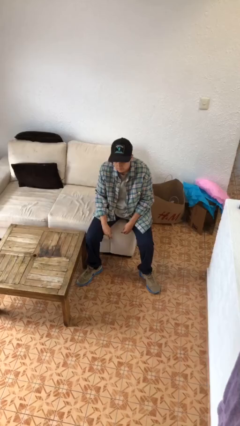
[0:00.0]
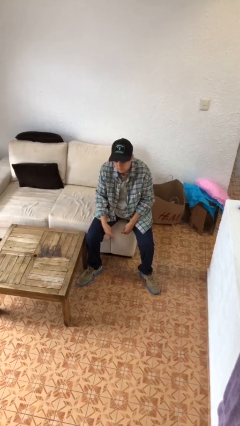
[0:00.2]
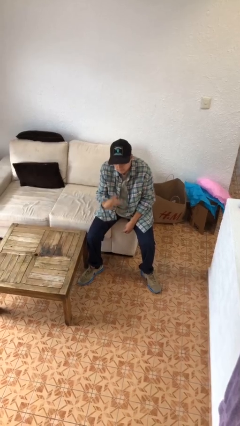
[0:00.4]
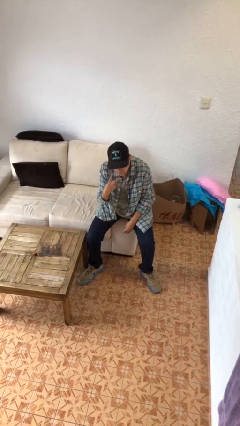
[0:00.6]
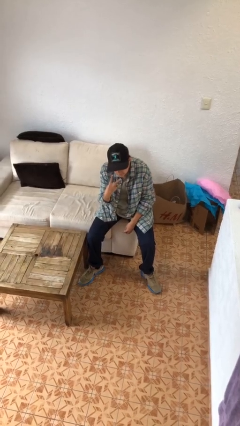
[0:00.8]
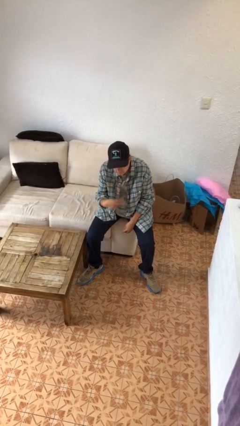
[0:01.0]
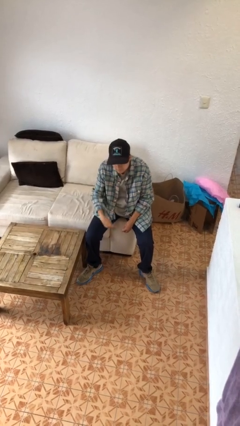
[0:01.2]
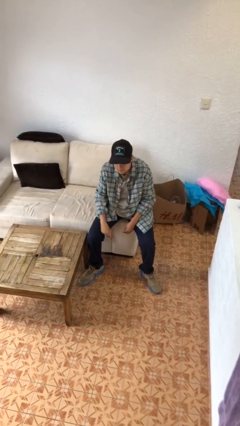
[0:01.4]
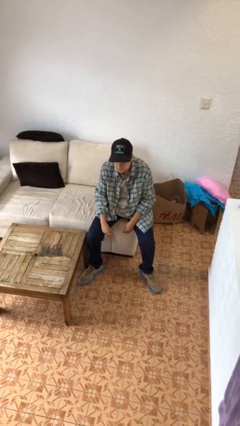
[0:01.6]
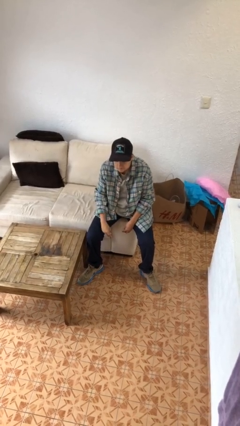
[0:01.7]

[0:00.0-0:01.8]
person gestures watch closely

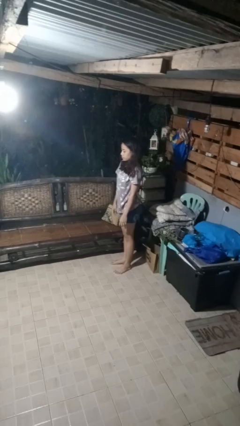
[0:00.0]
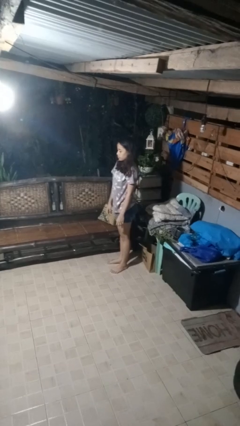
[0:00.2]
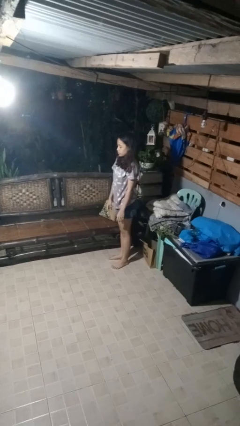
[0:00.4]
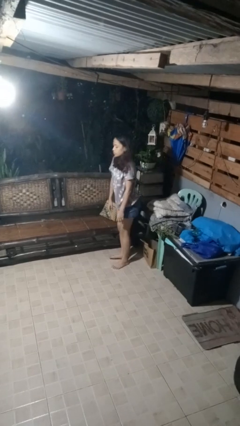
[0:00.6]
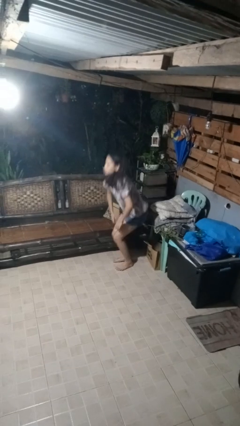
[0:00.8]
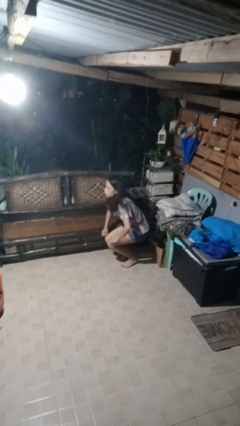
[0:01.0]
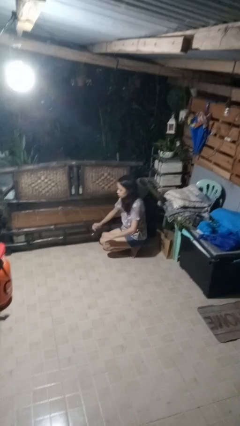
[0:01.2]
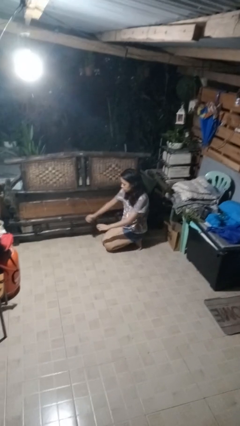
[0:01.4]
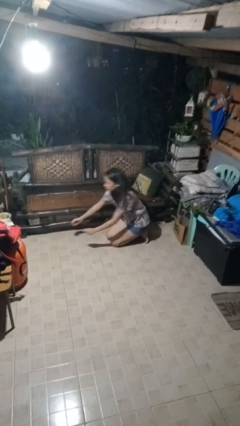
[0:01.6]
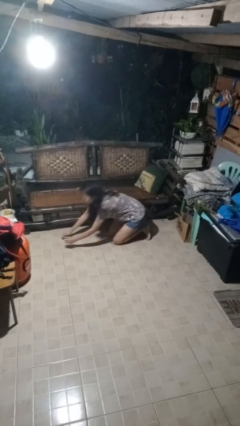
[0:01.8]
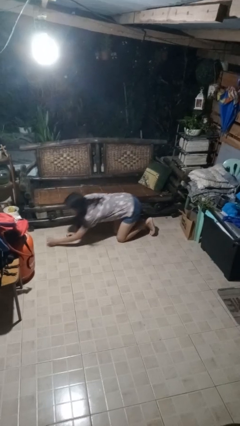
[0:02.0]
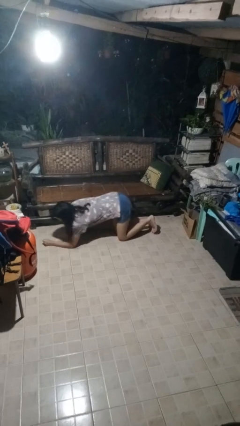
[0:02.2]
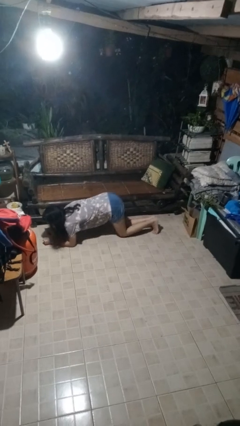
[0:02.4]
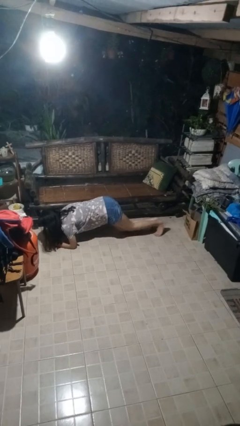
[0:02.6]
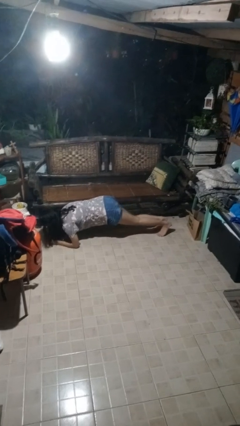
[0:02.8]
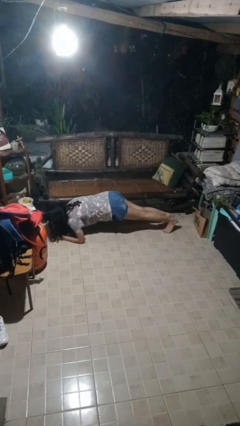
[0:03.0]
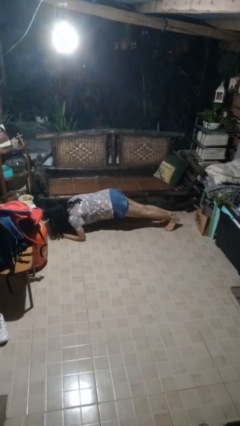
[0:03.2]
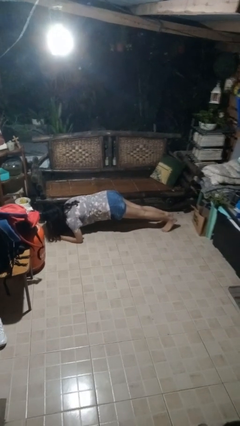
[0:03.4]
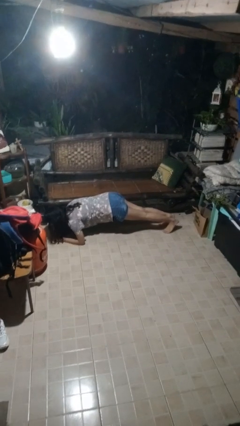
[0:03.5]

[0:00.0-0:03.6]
person exercises with plank

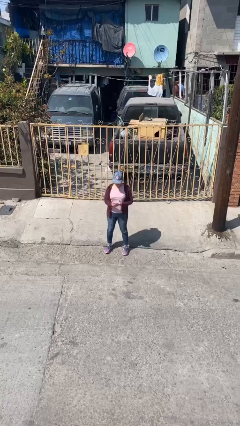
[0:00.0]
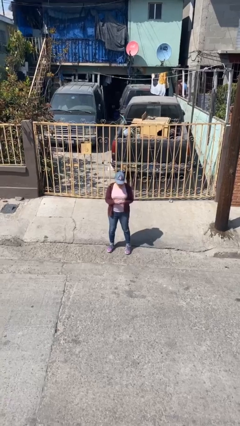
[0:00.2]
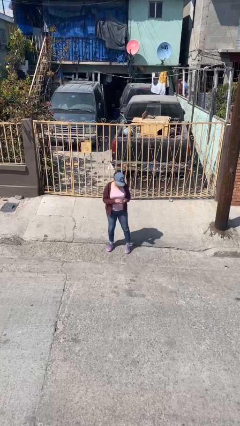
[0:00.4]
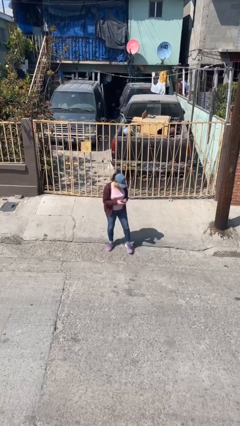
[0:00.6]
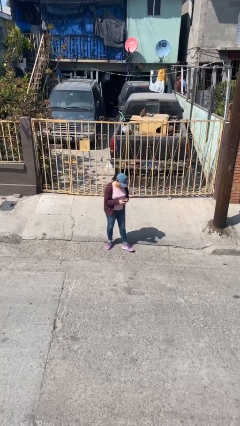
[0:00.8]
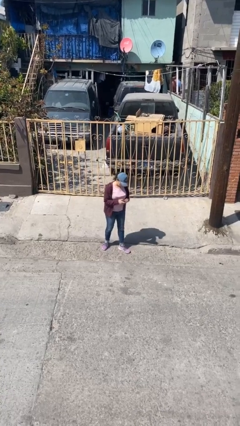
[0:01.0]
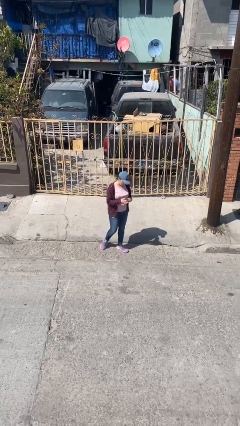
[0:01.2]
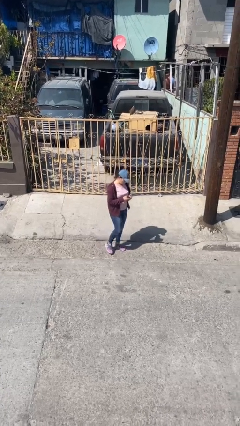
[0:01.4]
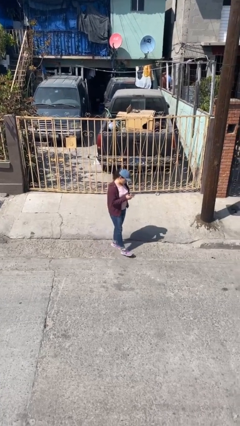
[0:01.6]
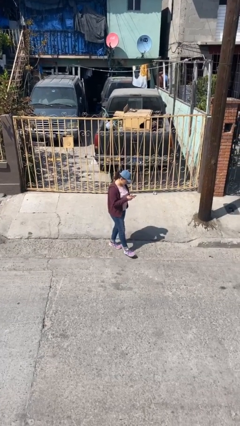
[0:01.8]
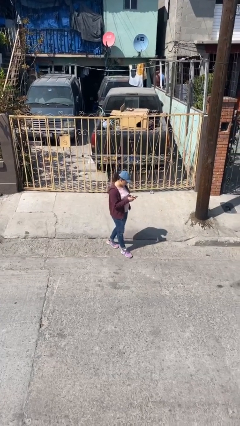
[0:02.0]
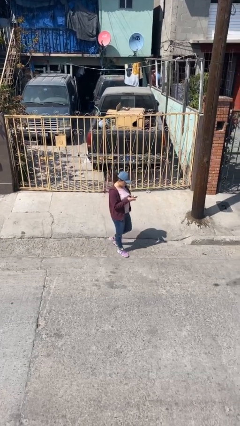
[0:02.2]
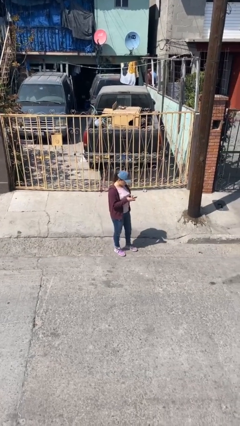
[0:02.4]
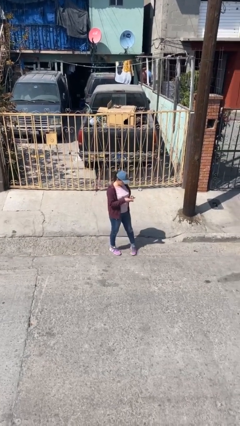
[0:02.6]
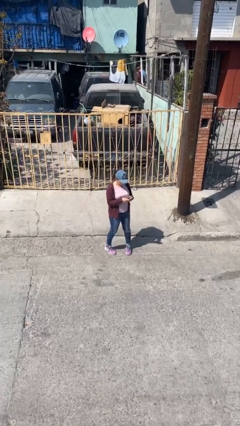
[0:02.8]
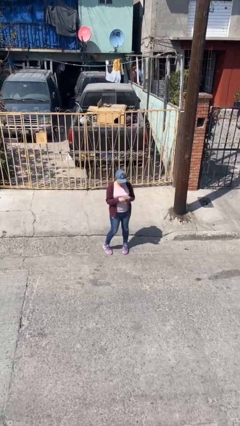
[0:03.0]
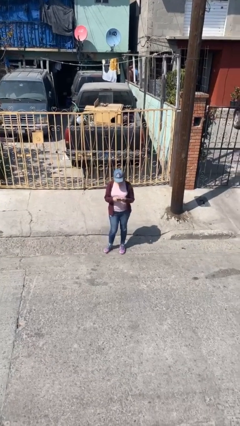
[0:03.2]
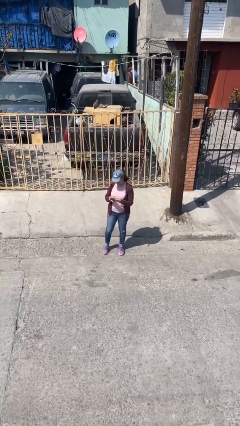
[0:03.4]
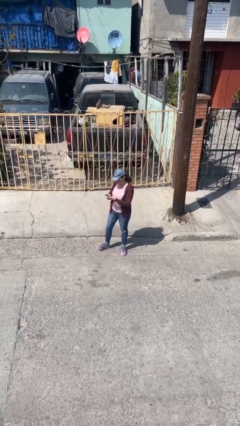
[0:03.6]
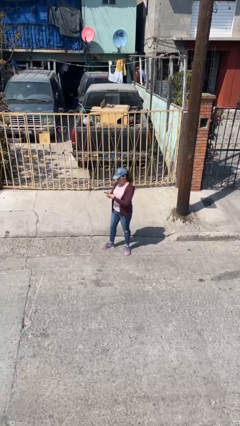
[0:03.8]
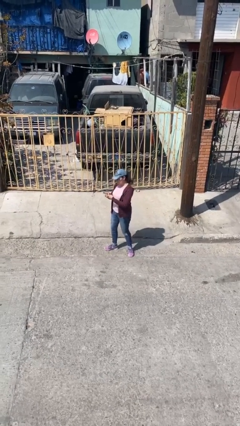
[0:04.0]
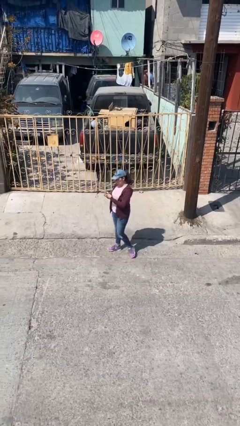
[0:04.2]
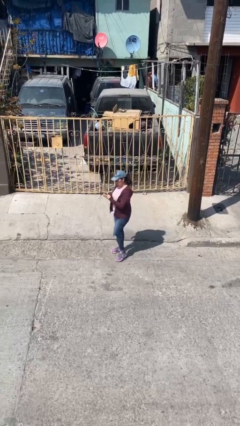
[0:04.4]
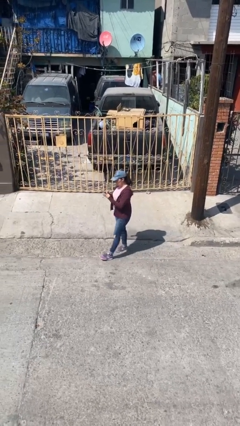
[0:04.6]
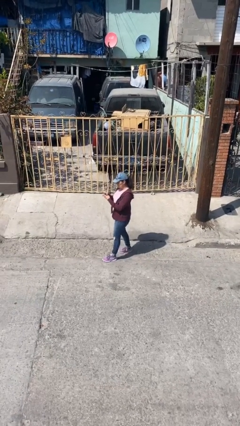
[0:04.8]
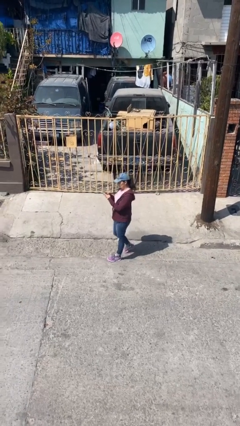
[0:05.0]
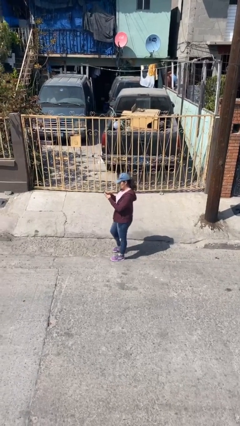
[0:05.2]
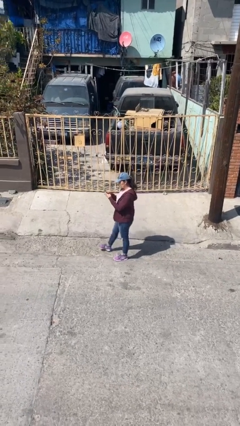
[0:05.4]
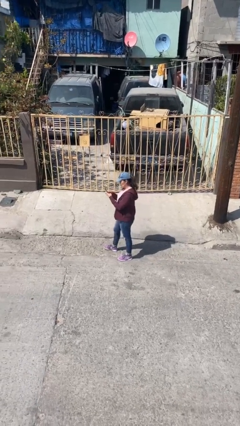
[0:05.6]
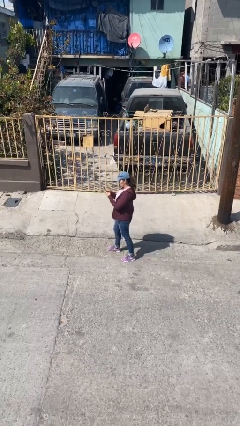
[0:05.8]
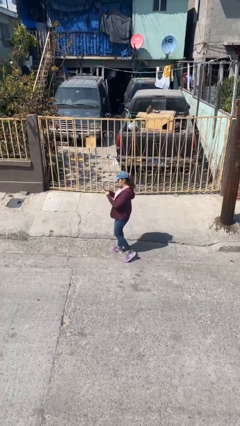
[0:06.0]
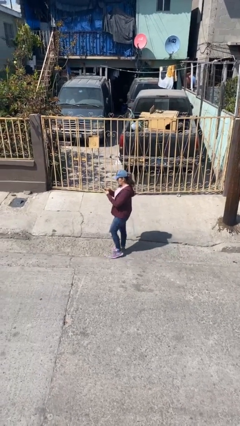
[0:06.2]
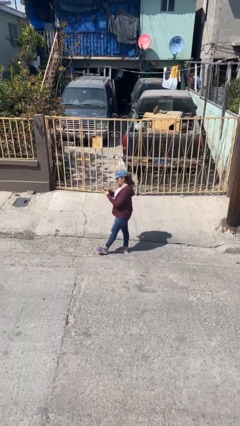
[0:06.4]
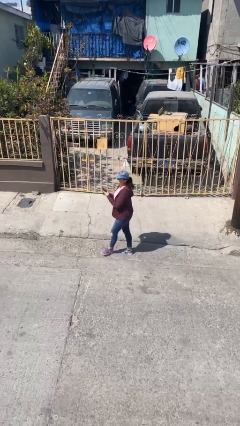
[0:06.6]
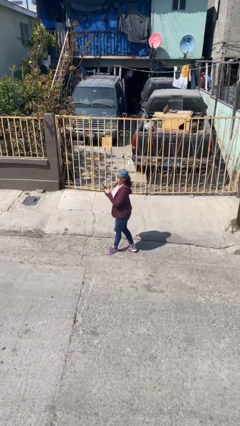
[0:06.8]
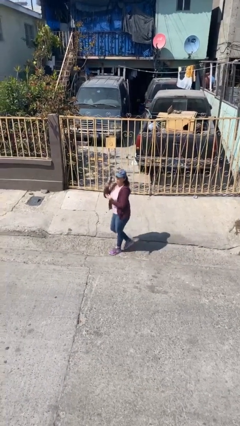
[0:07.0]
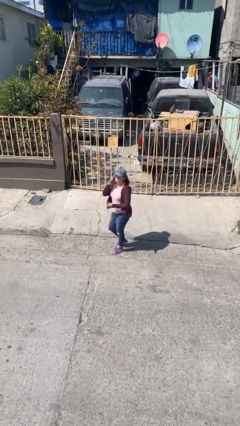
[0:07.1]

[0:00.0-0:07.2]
person texts on phone

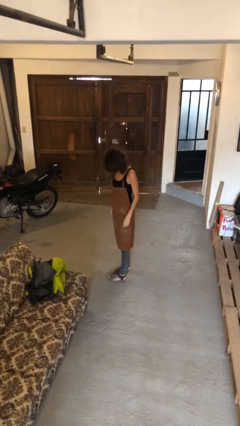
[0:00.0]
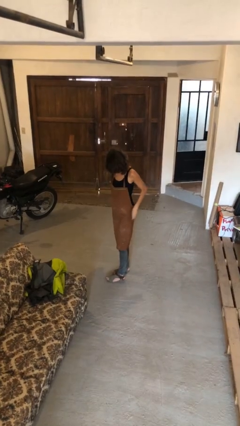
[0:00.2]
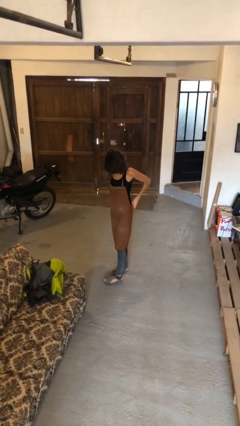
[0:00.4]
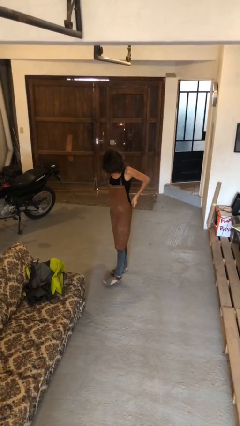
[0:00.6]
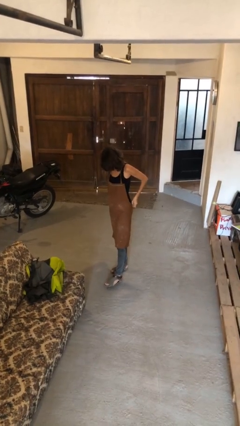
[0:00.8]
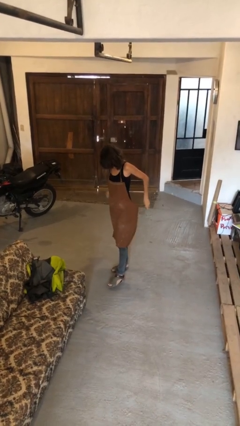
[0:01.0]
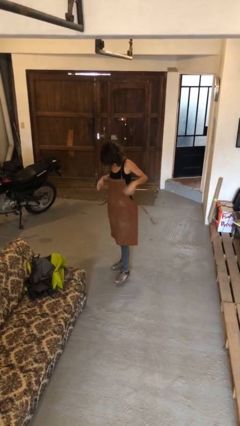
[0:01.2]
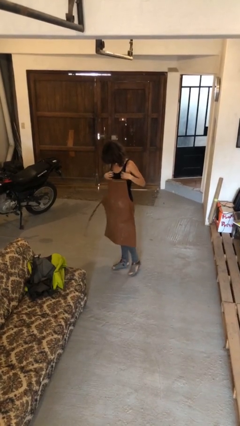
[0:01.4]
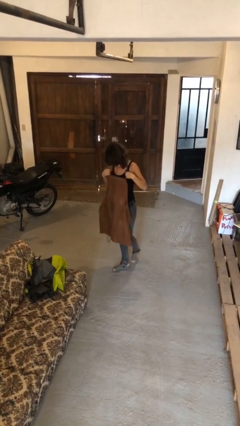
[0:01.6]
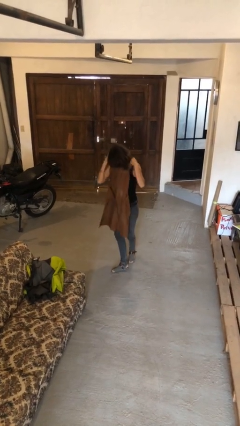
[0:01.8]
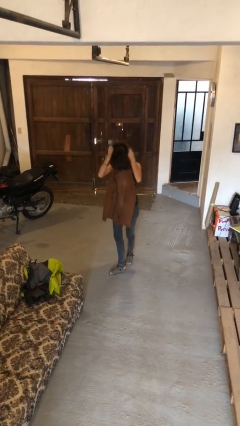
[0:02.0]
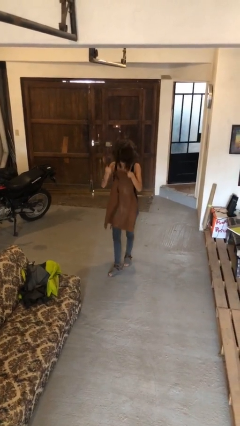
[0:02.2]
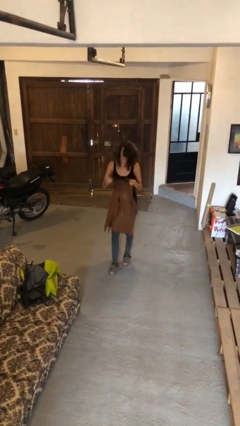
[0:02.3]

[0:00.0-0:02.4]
person takes off apron

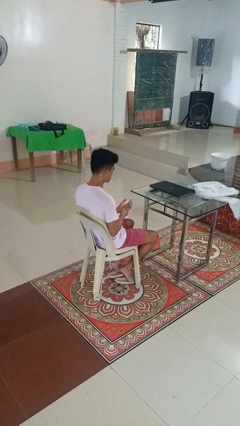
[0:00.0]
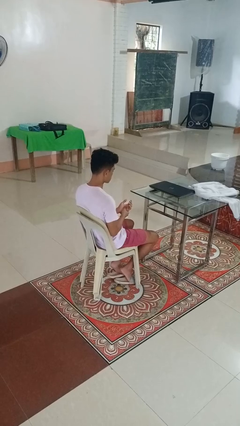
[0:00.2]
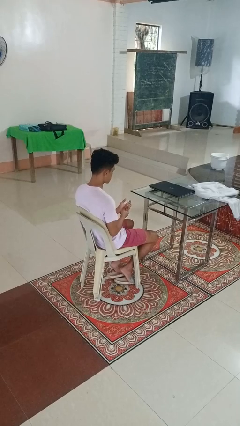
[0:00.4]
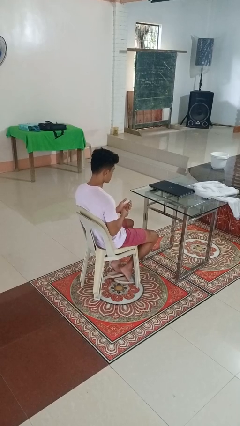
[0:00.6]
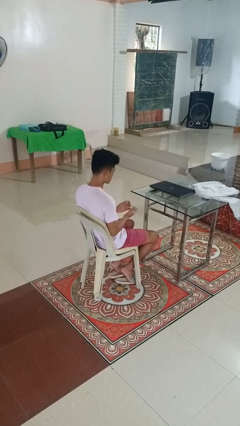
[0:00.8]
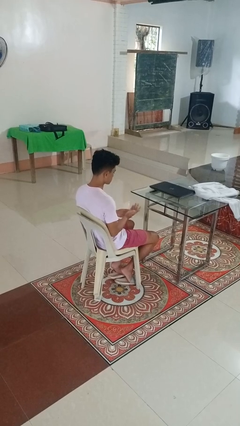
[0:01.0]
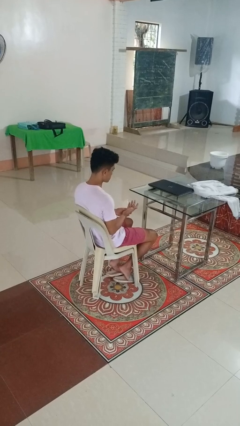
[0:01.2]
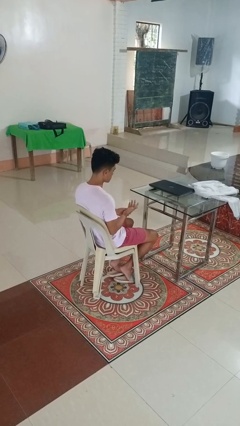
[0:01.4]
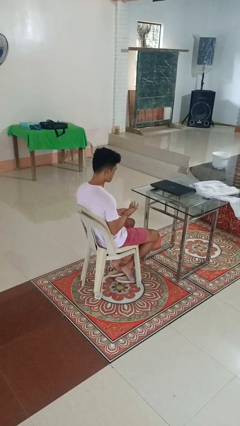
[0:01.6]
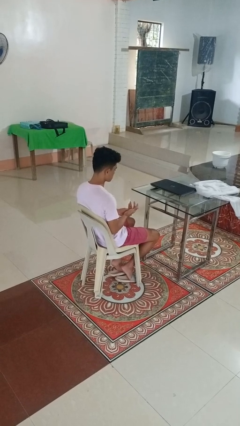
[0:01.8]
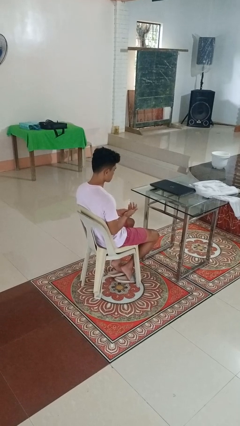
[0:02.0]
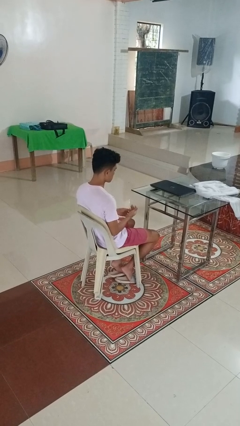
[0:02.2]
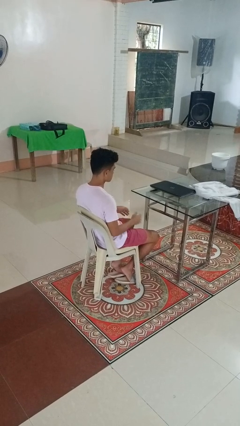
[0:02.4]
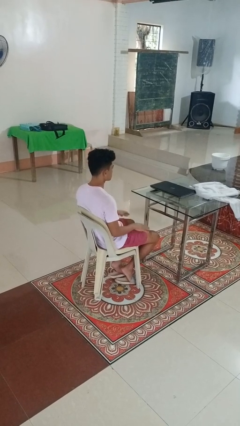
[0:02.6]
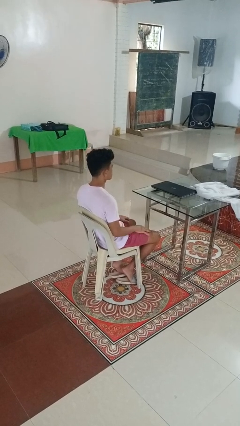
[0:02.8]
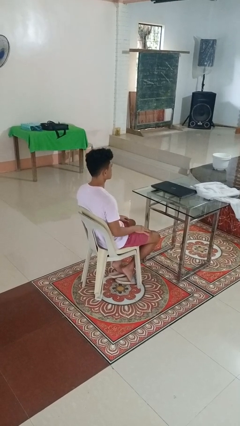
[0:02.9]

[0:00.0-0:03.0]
person looks at hands in lap
